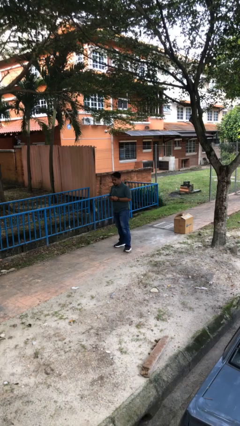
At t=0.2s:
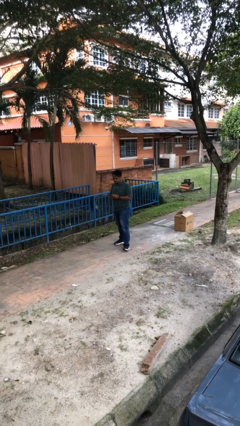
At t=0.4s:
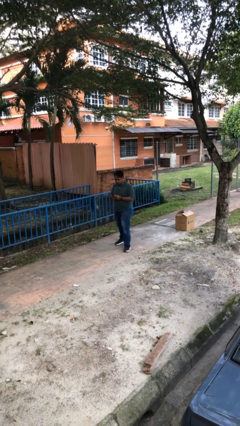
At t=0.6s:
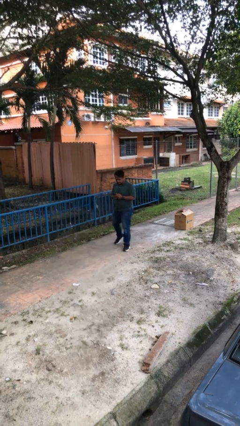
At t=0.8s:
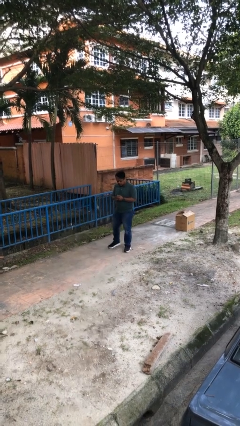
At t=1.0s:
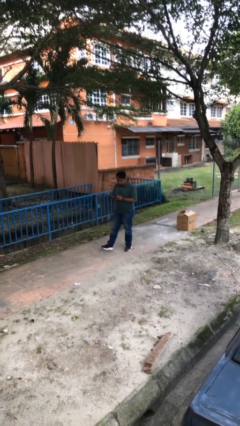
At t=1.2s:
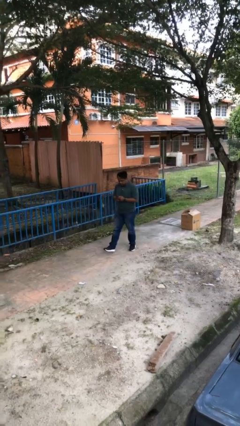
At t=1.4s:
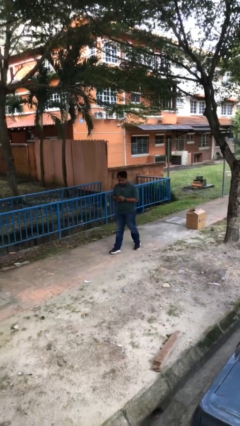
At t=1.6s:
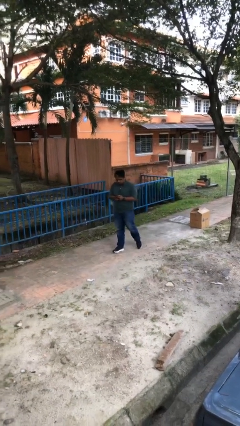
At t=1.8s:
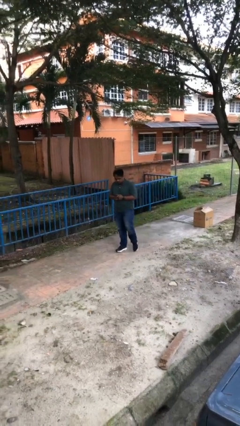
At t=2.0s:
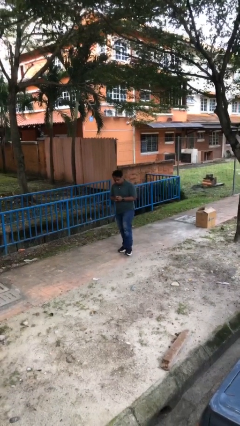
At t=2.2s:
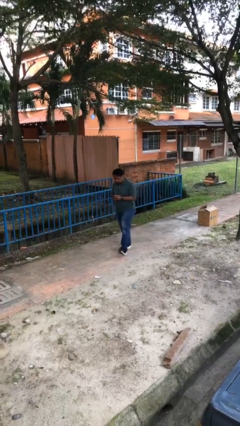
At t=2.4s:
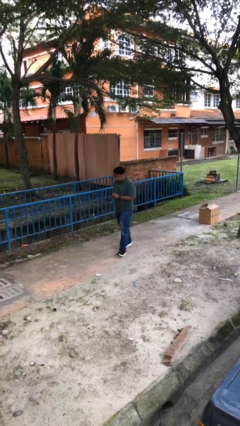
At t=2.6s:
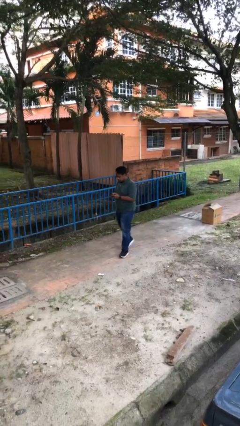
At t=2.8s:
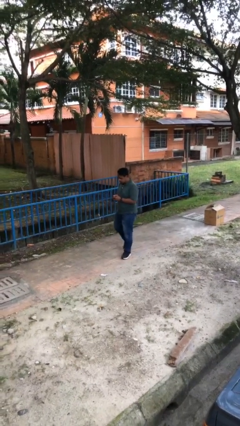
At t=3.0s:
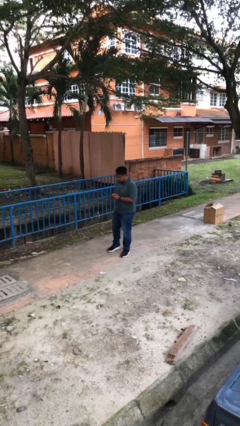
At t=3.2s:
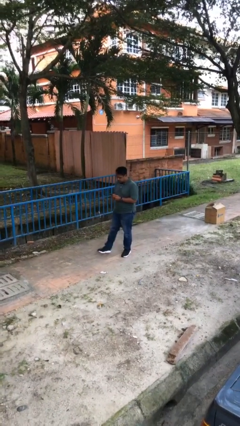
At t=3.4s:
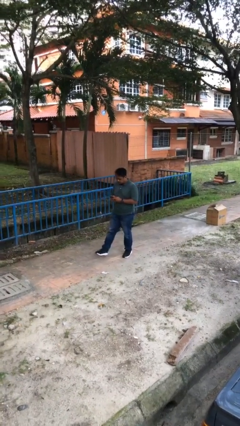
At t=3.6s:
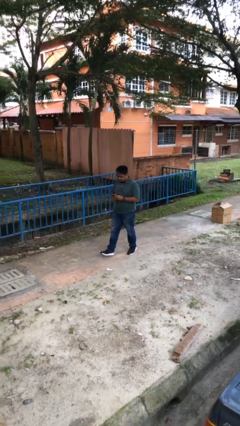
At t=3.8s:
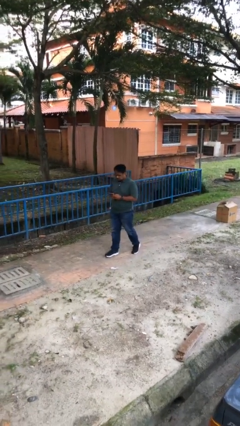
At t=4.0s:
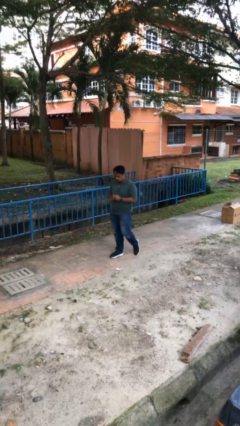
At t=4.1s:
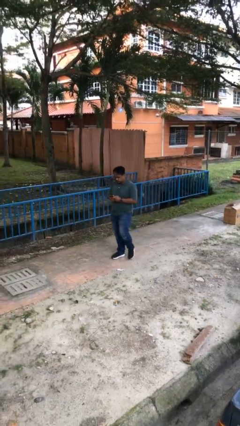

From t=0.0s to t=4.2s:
person texts on phone

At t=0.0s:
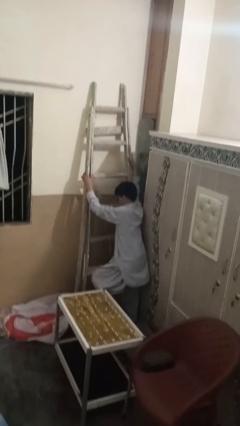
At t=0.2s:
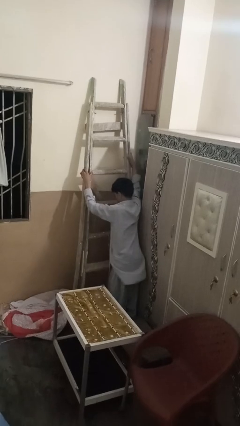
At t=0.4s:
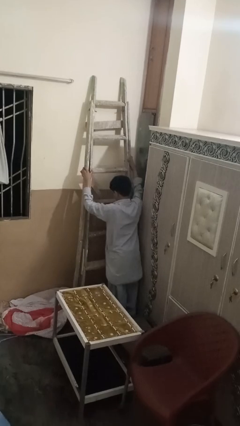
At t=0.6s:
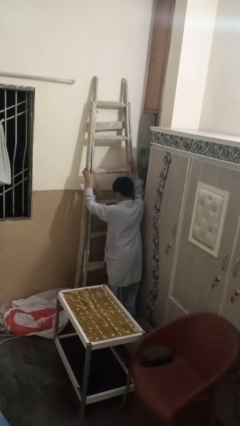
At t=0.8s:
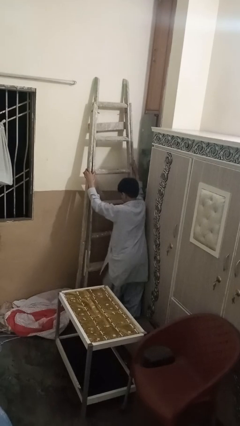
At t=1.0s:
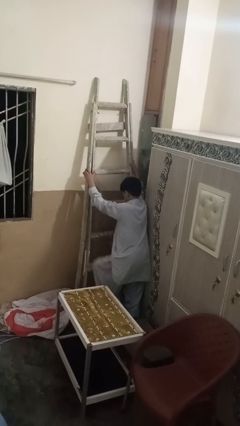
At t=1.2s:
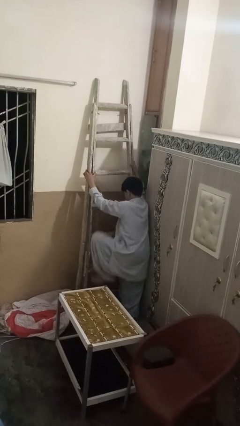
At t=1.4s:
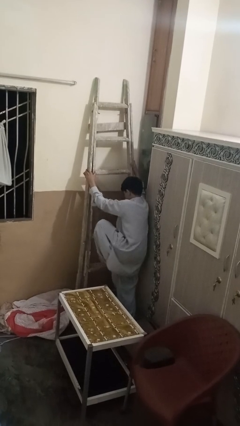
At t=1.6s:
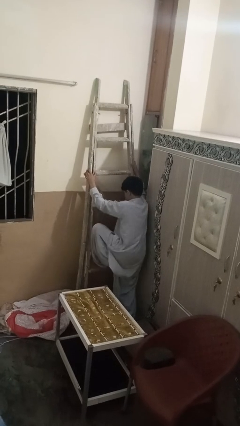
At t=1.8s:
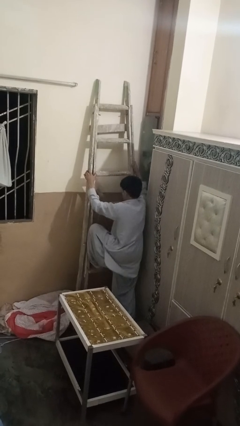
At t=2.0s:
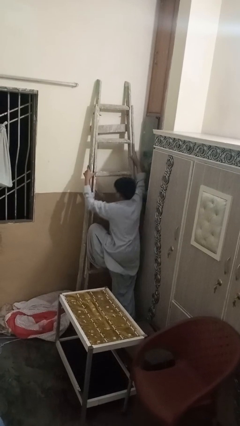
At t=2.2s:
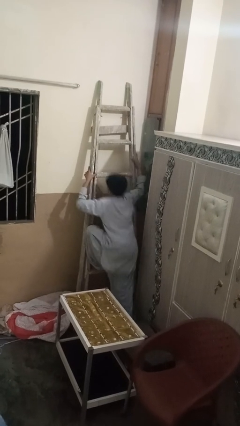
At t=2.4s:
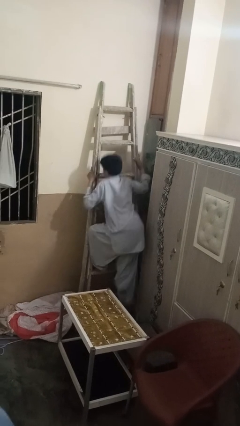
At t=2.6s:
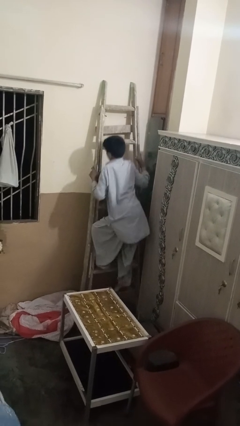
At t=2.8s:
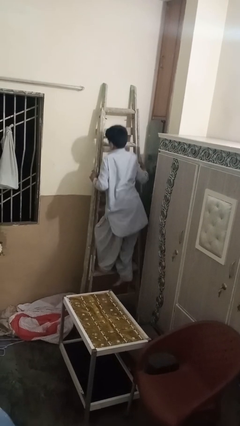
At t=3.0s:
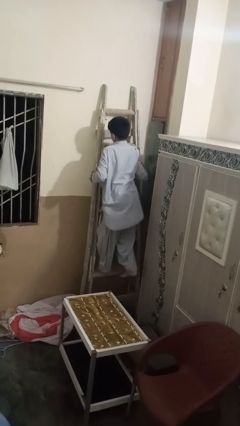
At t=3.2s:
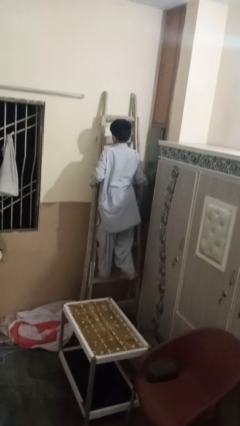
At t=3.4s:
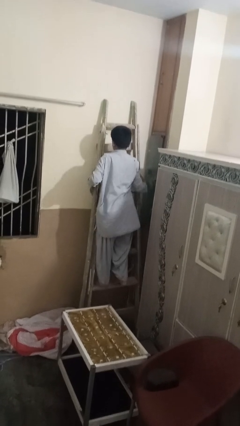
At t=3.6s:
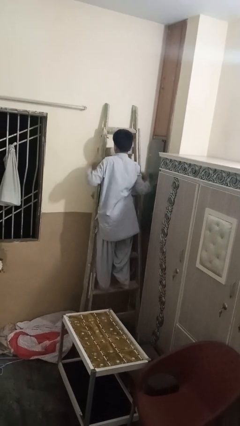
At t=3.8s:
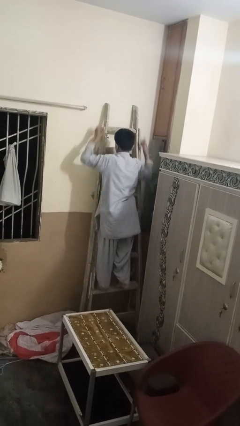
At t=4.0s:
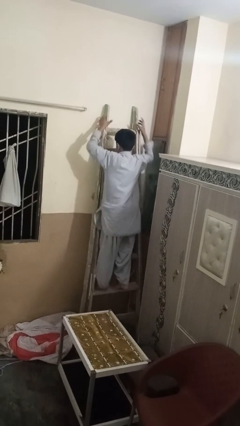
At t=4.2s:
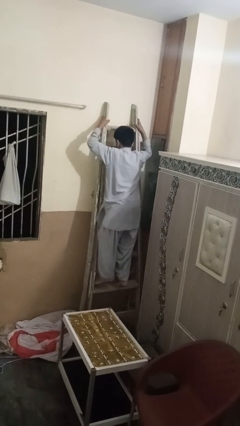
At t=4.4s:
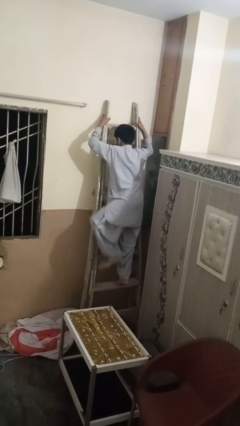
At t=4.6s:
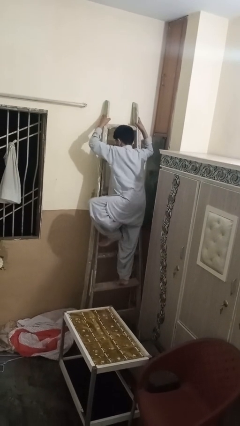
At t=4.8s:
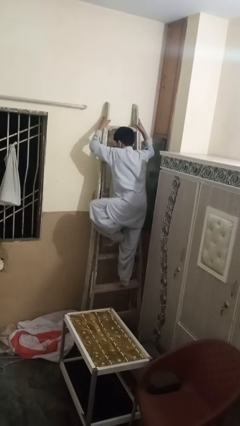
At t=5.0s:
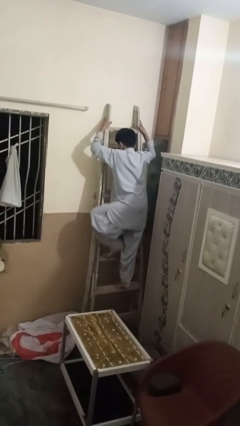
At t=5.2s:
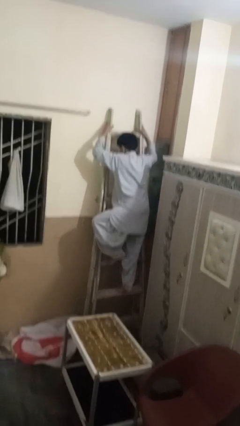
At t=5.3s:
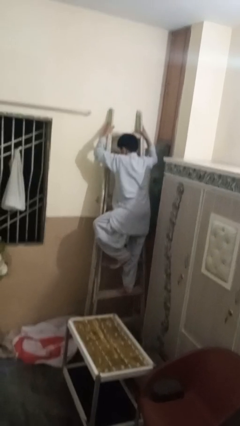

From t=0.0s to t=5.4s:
person climbs up ladder

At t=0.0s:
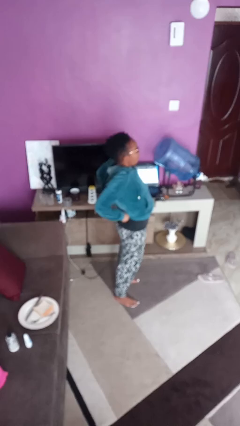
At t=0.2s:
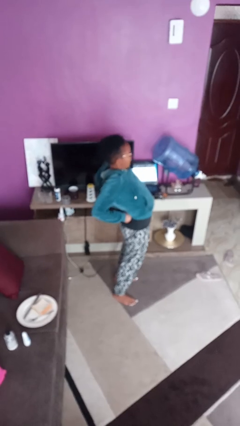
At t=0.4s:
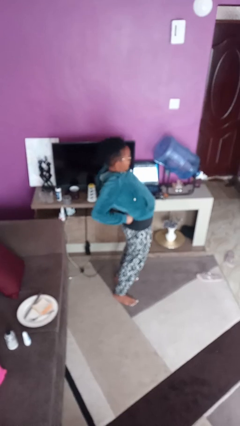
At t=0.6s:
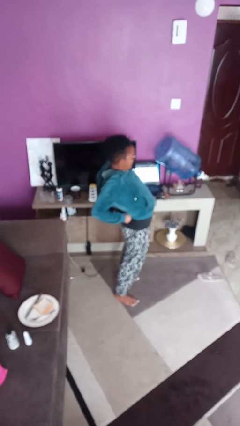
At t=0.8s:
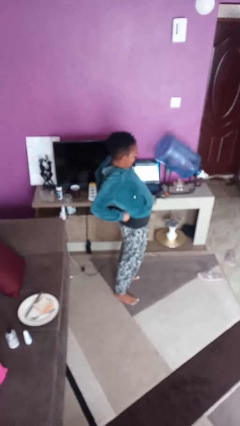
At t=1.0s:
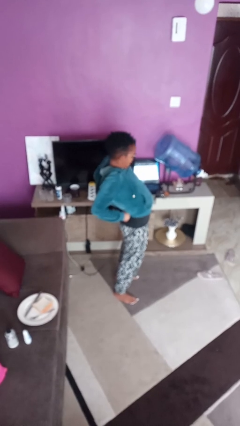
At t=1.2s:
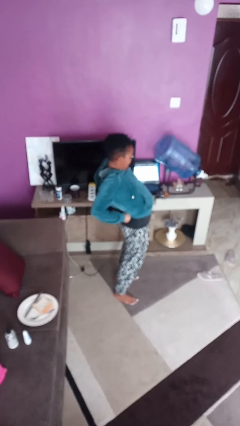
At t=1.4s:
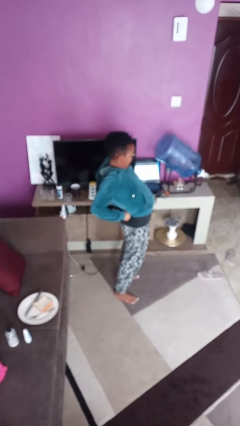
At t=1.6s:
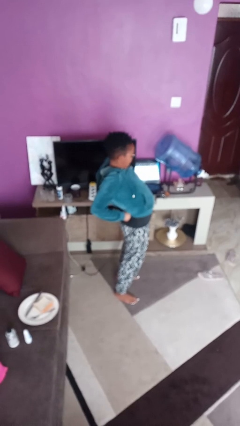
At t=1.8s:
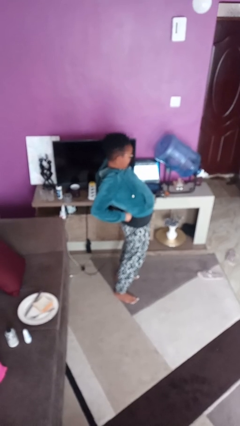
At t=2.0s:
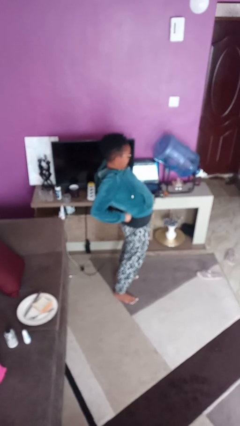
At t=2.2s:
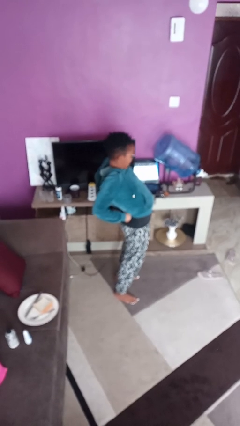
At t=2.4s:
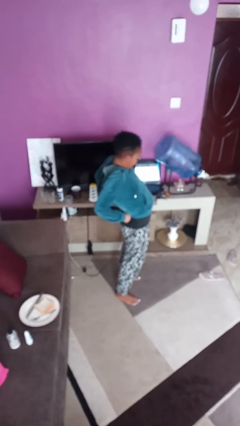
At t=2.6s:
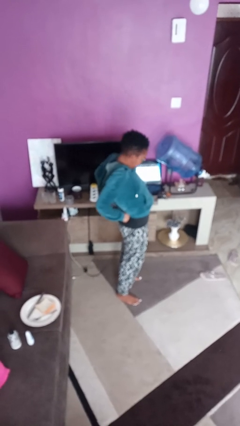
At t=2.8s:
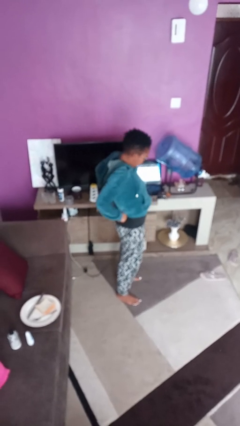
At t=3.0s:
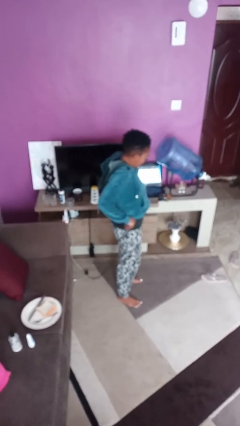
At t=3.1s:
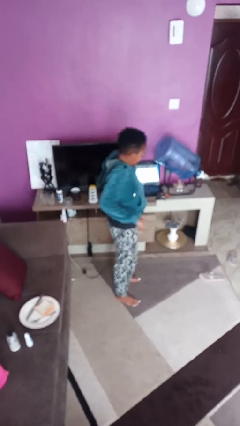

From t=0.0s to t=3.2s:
person stretches back

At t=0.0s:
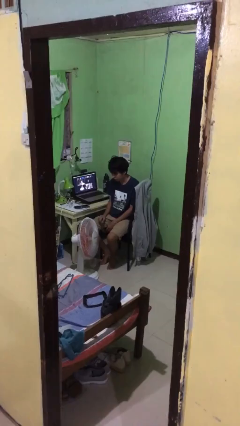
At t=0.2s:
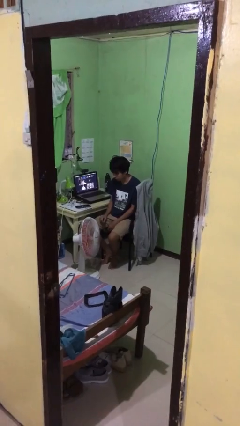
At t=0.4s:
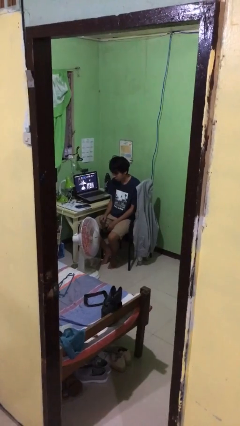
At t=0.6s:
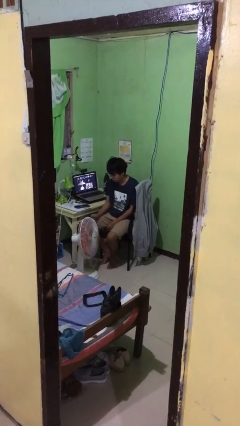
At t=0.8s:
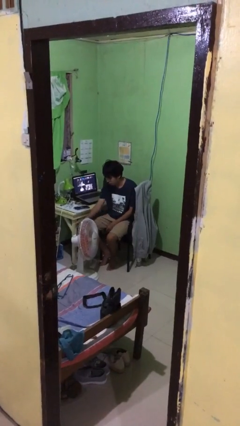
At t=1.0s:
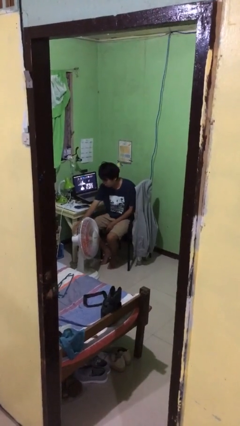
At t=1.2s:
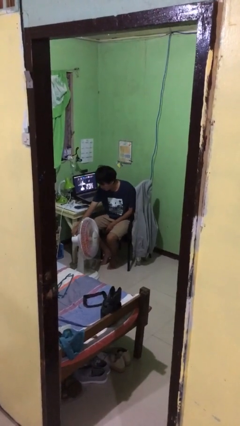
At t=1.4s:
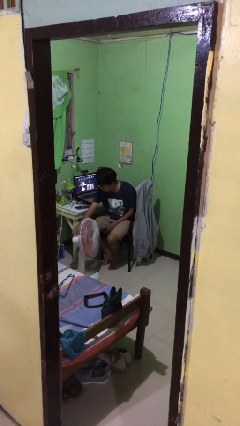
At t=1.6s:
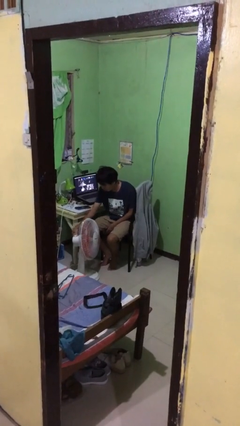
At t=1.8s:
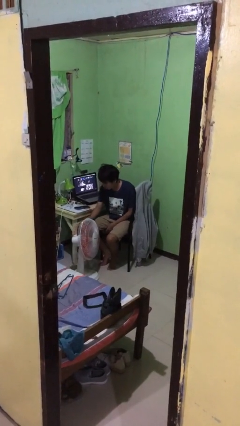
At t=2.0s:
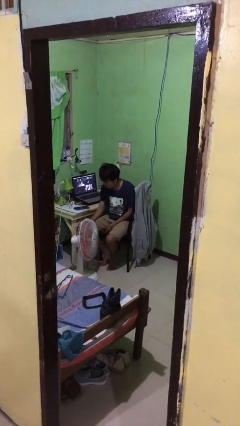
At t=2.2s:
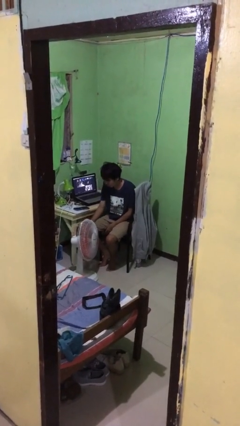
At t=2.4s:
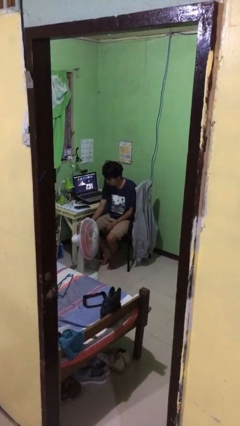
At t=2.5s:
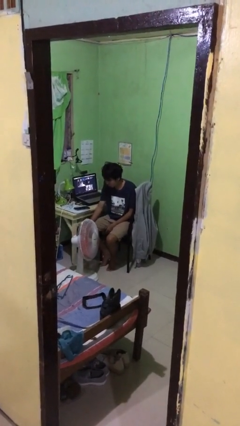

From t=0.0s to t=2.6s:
person turns on fan

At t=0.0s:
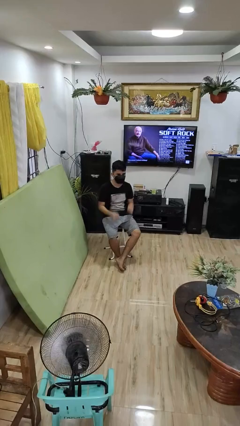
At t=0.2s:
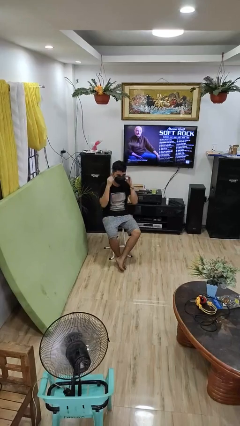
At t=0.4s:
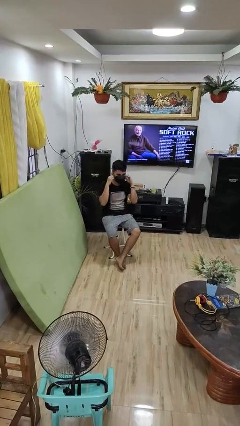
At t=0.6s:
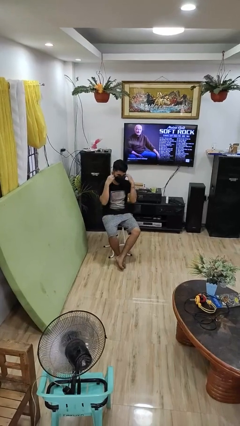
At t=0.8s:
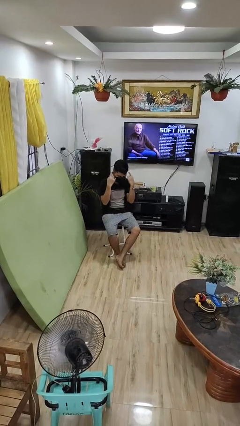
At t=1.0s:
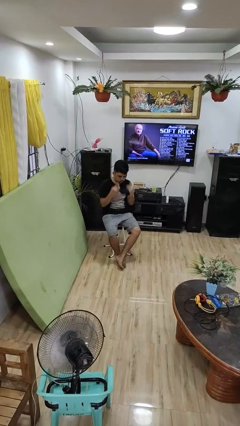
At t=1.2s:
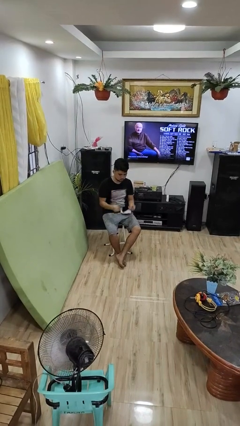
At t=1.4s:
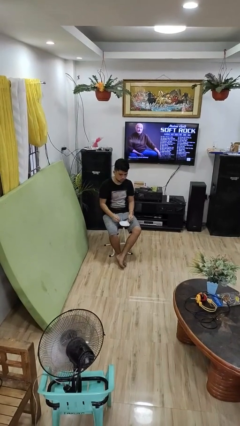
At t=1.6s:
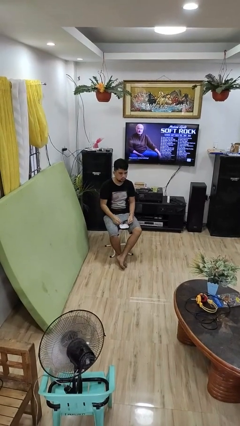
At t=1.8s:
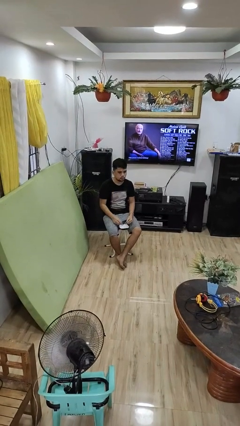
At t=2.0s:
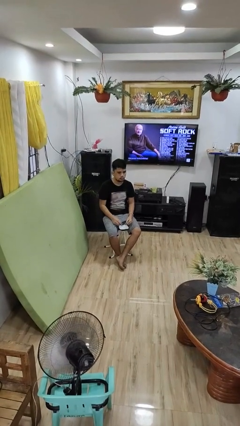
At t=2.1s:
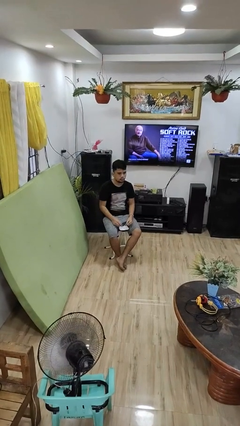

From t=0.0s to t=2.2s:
person takes off facemask
